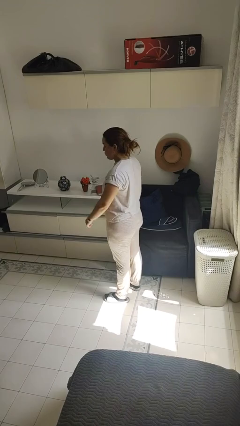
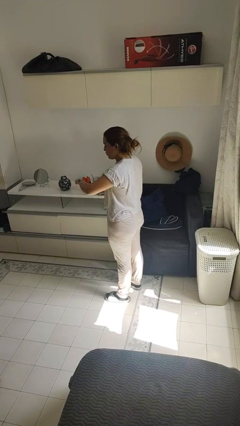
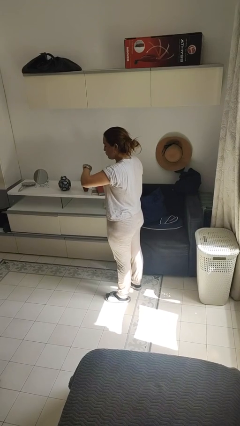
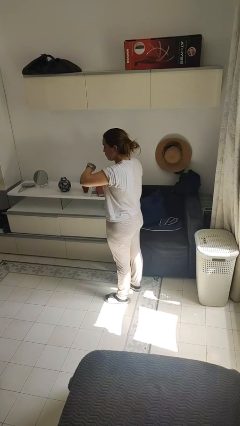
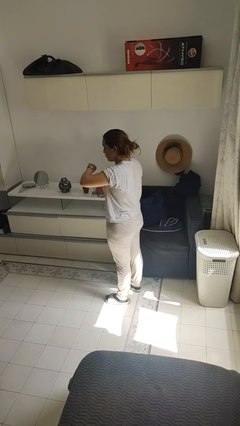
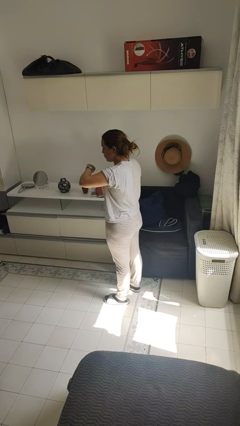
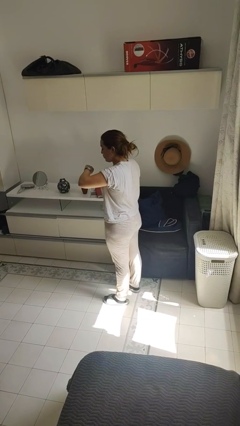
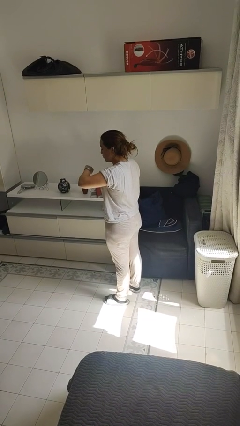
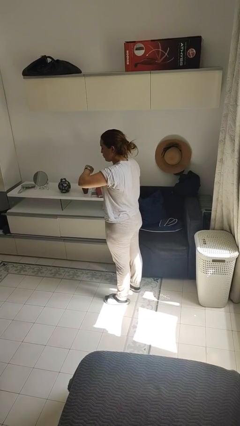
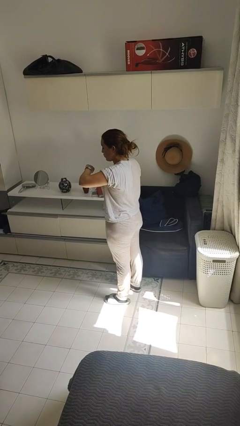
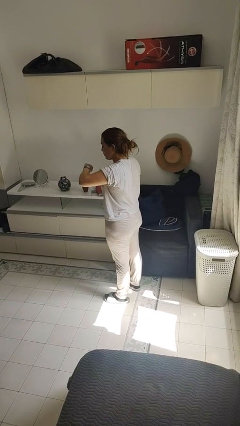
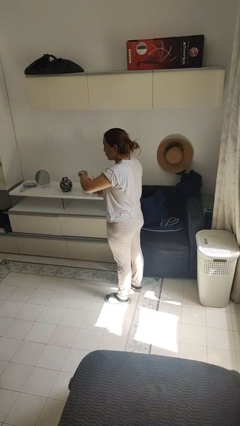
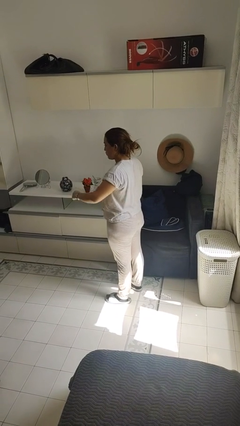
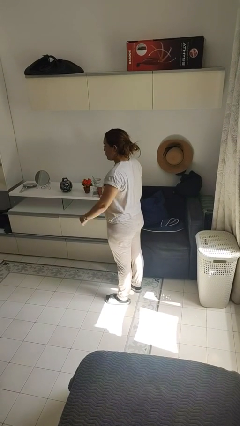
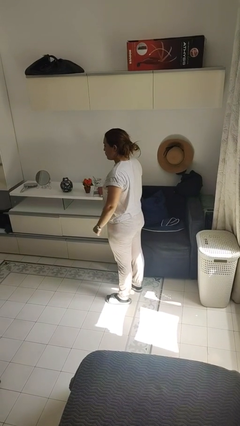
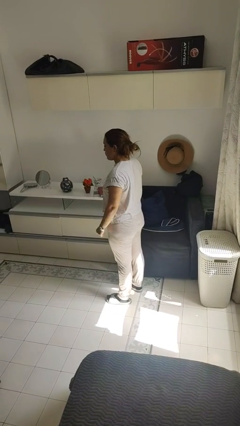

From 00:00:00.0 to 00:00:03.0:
person looks at wristwatch

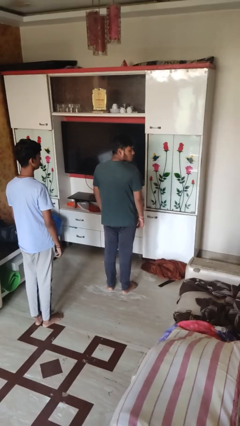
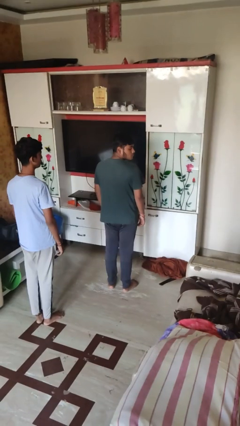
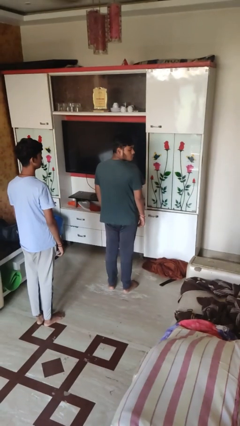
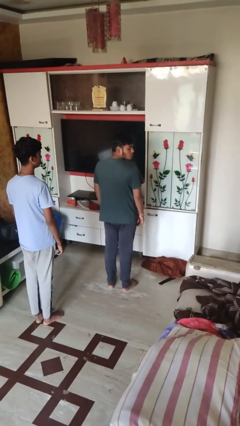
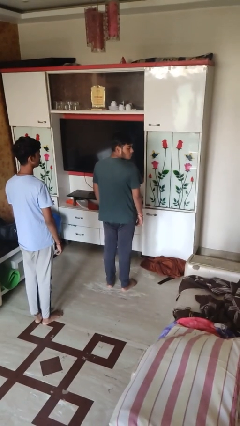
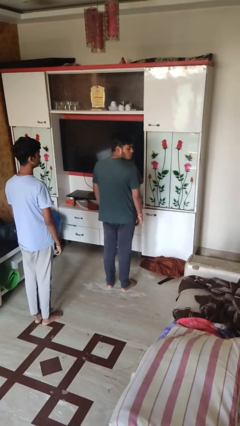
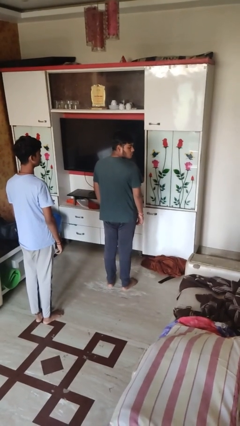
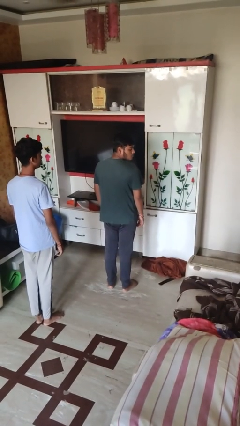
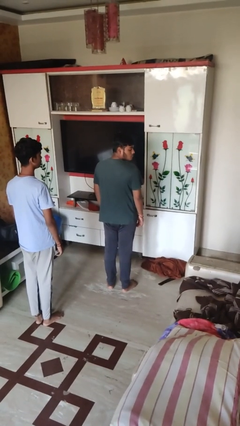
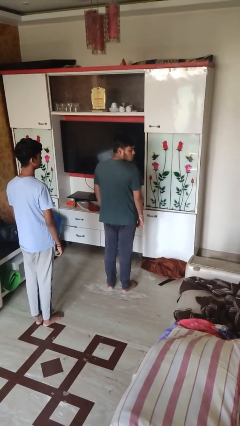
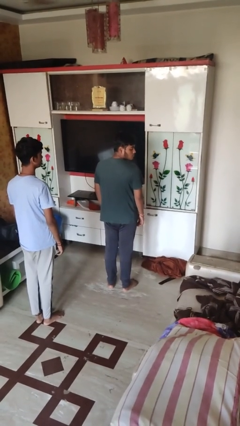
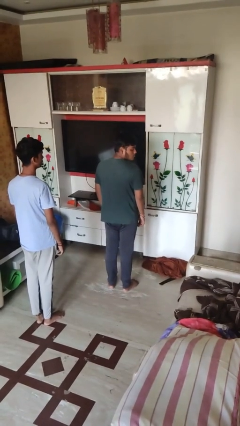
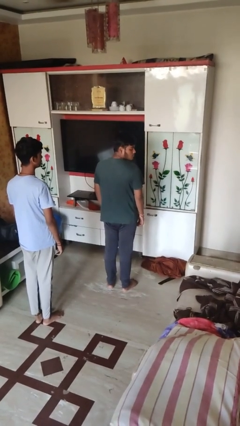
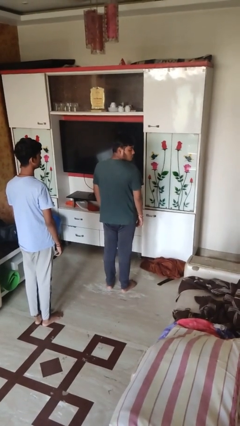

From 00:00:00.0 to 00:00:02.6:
person looks over shoulder

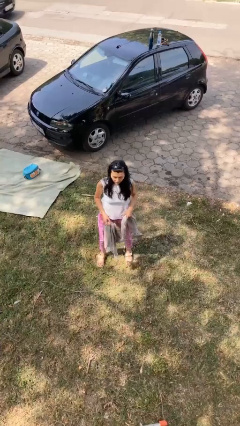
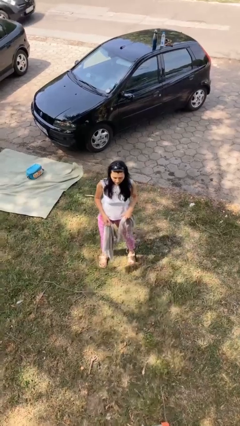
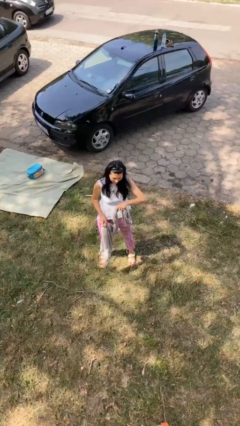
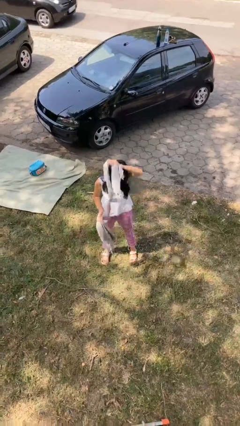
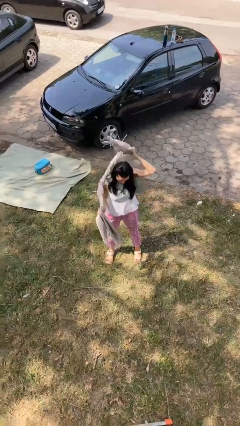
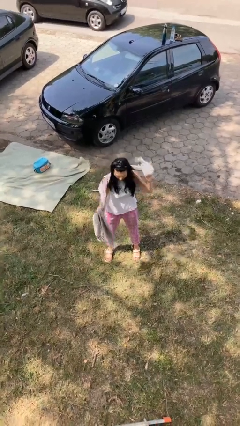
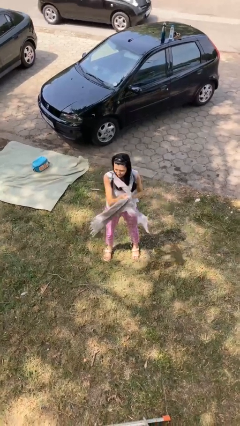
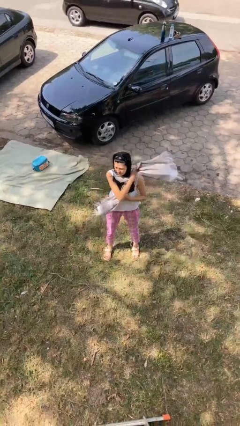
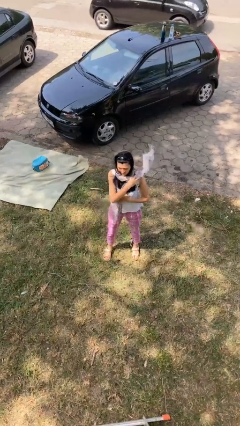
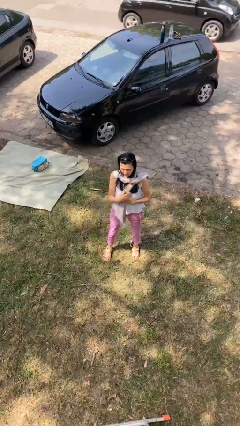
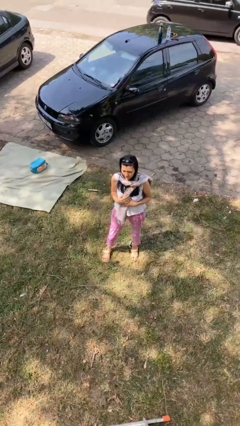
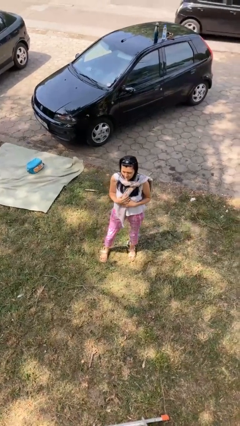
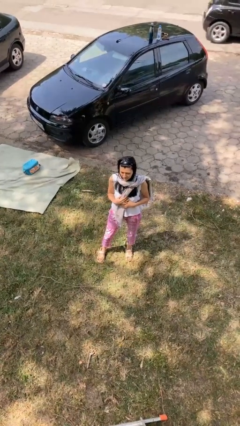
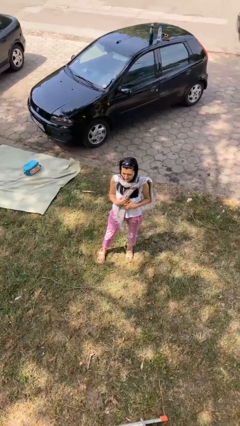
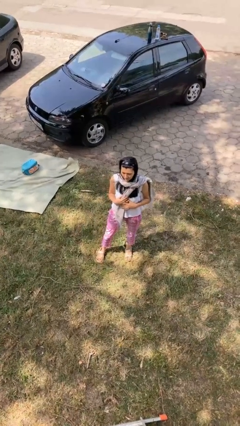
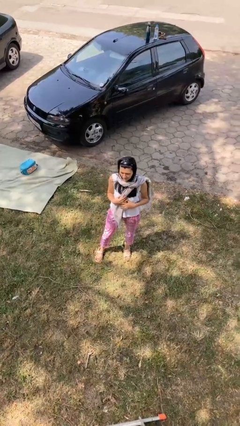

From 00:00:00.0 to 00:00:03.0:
person puts on scarf

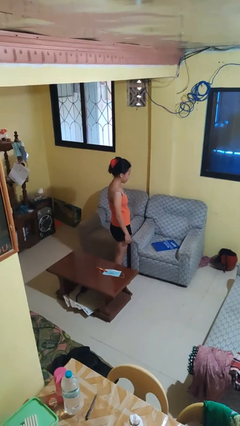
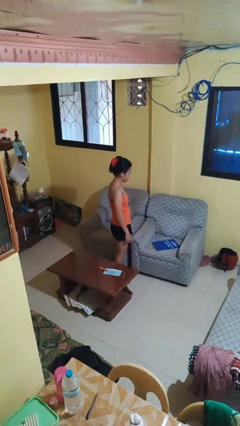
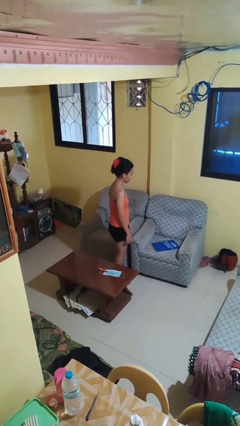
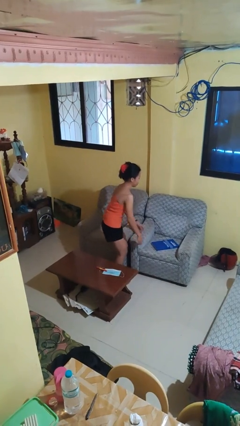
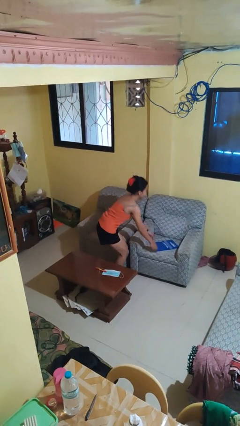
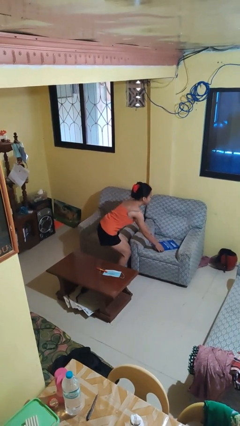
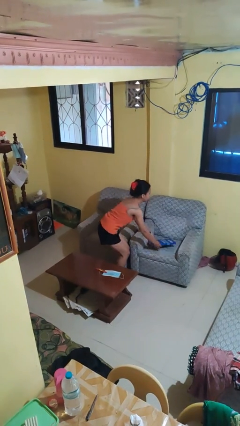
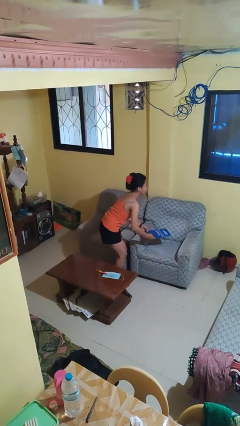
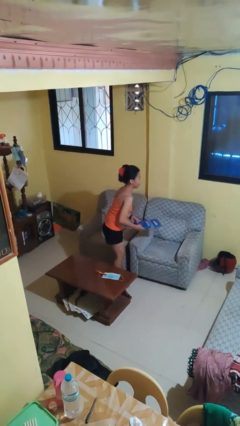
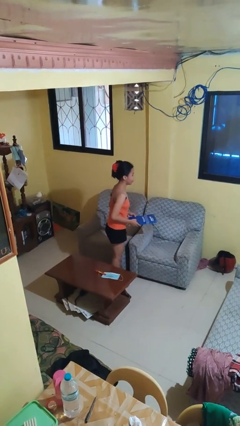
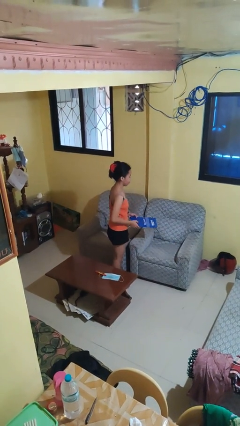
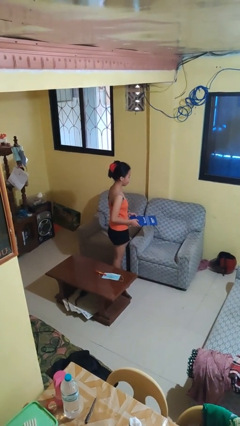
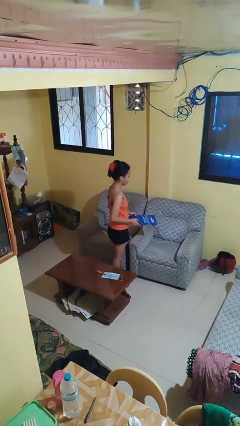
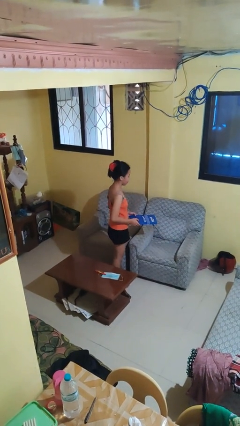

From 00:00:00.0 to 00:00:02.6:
person picks up object from couch

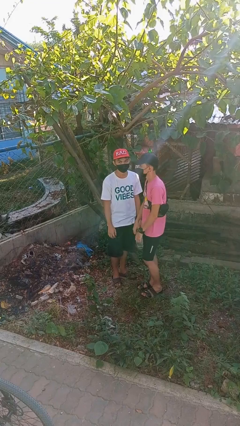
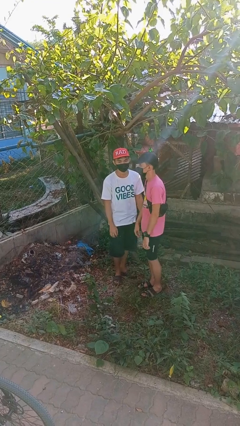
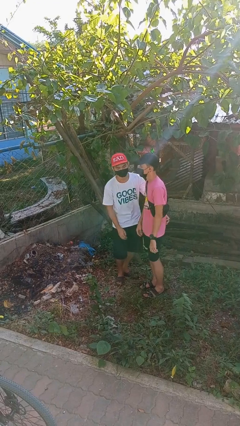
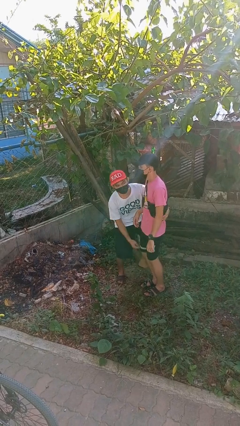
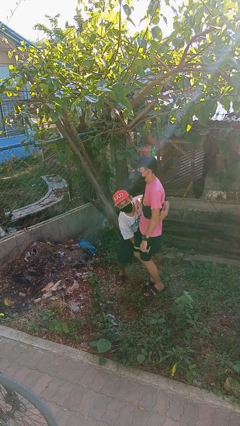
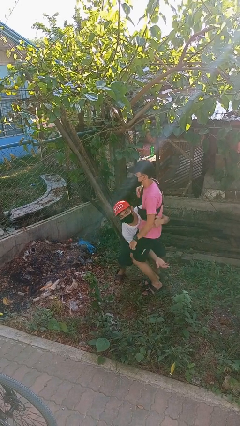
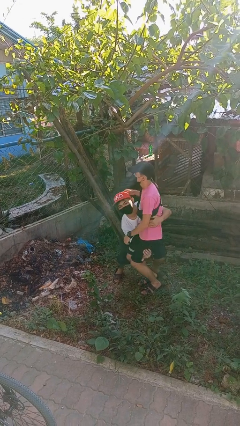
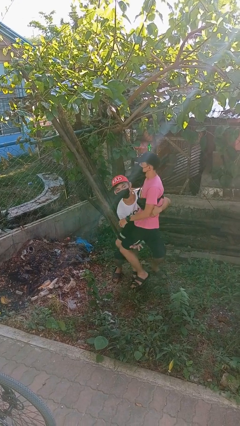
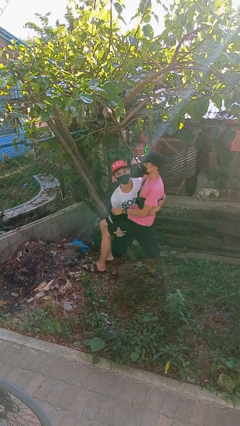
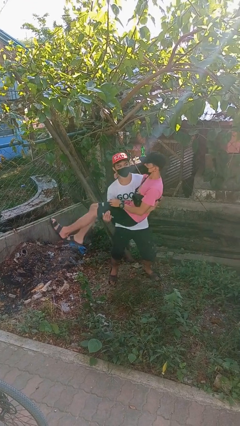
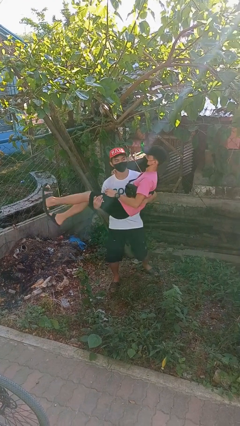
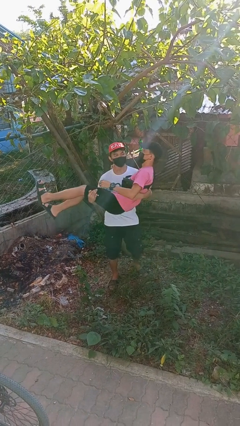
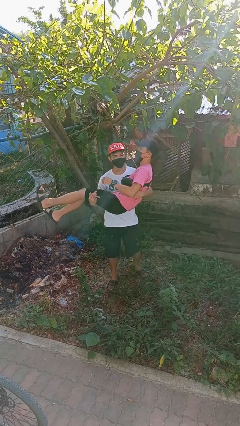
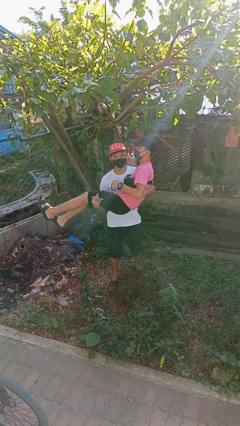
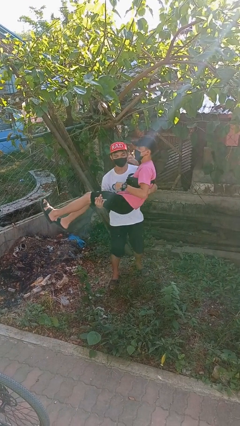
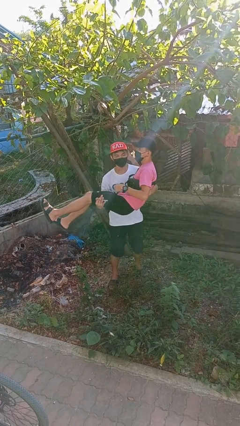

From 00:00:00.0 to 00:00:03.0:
person picks up person

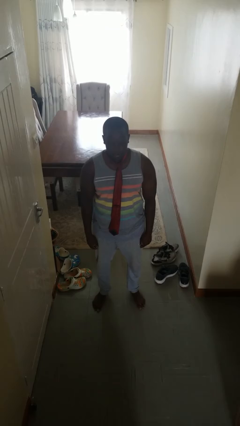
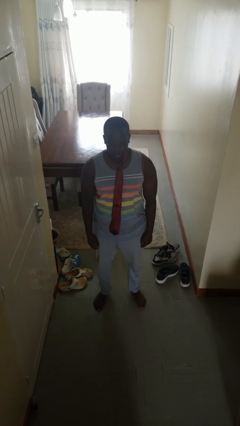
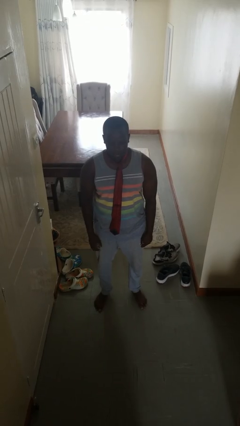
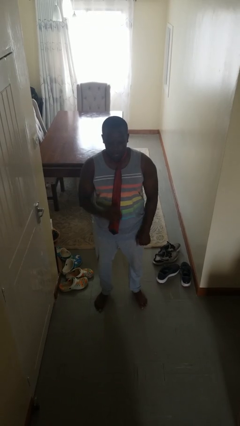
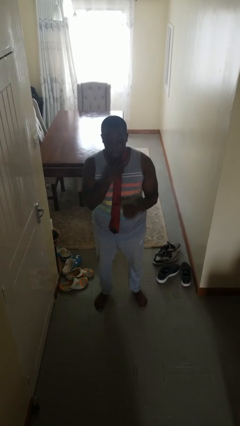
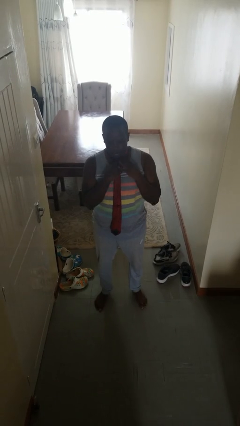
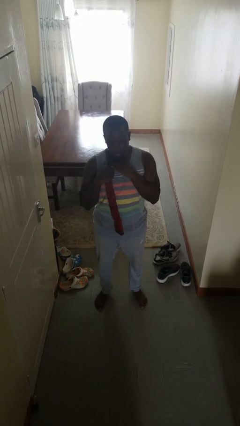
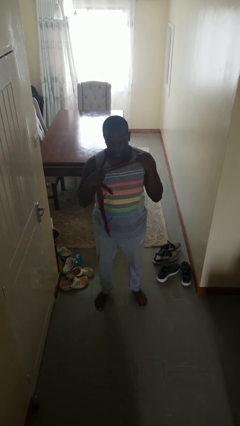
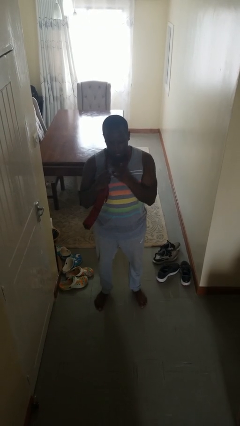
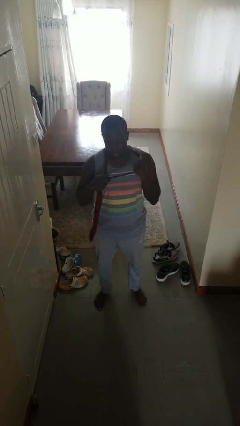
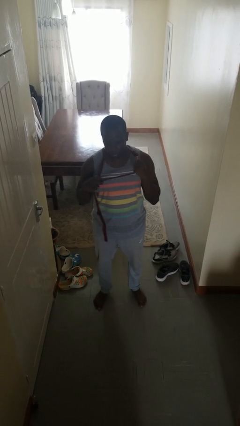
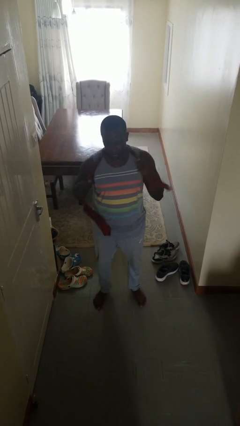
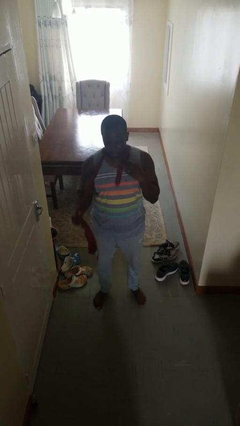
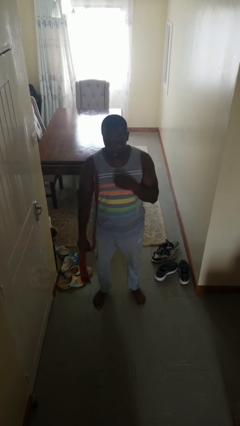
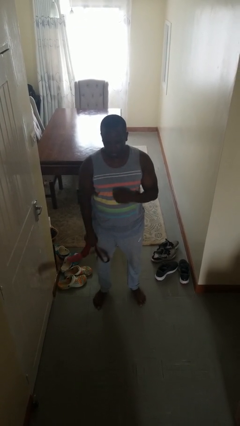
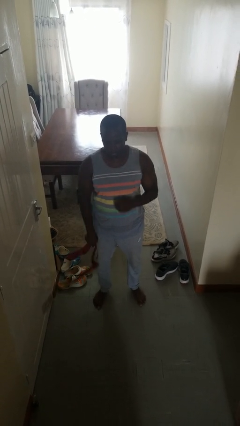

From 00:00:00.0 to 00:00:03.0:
person takes off necktie

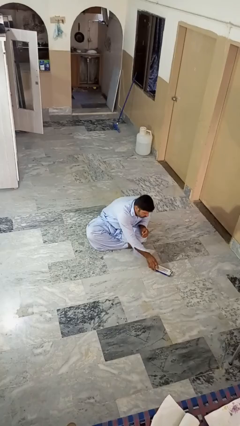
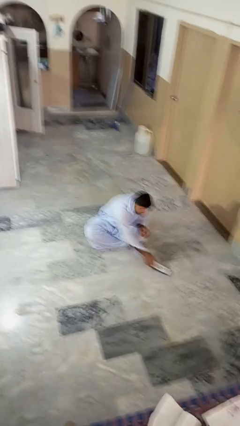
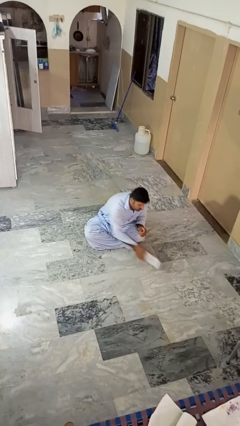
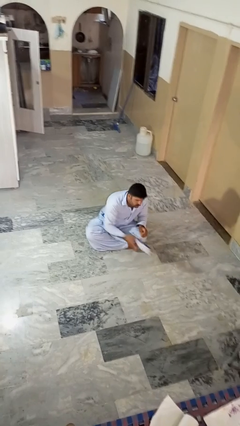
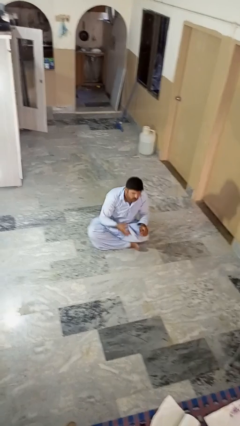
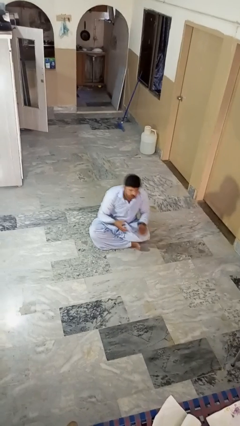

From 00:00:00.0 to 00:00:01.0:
person picks up object from floor
